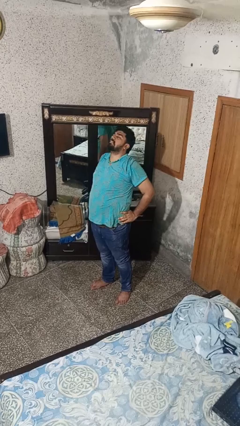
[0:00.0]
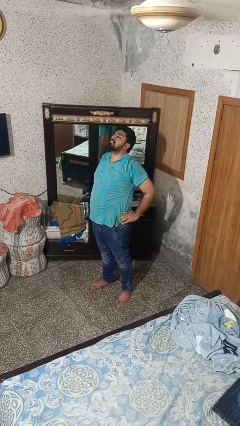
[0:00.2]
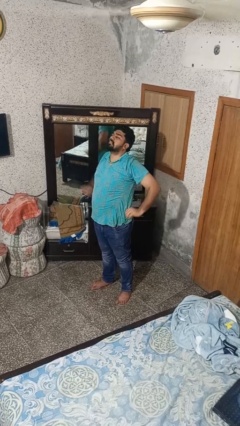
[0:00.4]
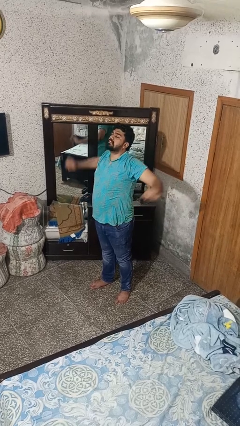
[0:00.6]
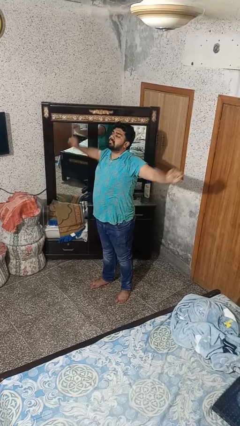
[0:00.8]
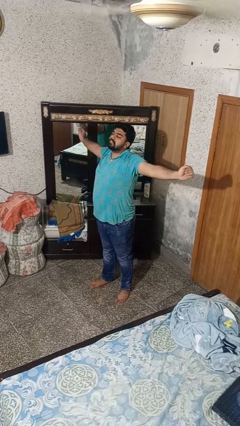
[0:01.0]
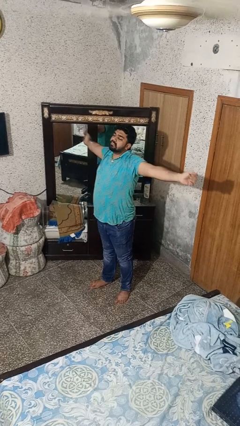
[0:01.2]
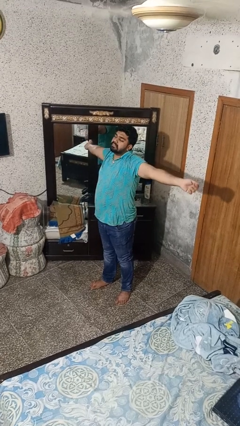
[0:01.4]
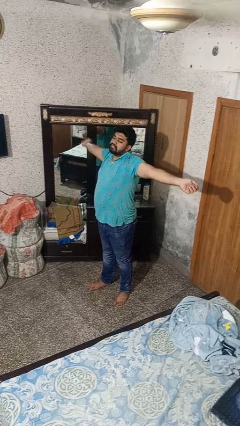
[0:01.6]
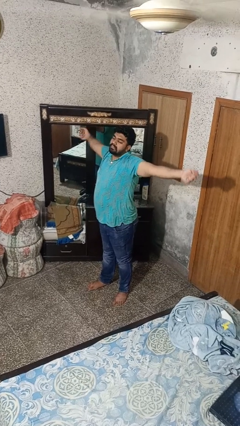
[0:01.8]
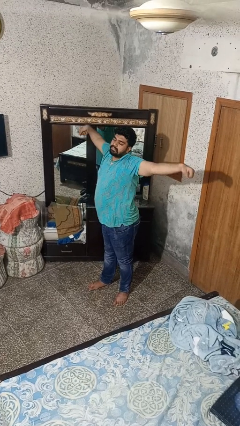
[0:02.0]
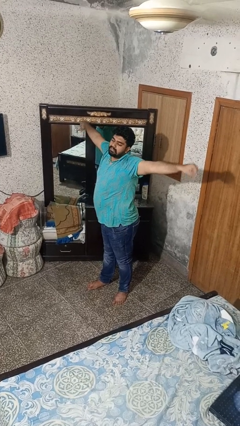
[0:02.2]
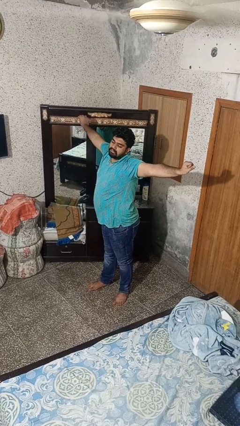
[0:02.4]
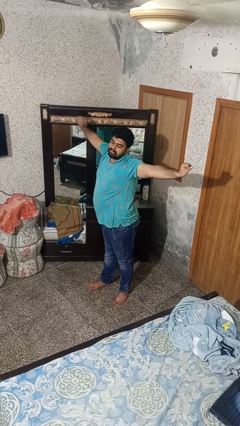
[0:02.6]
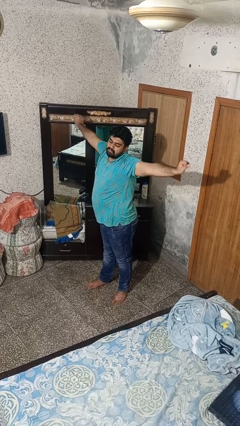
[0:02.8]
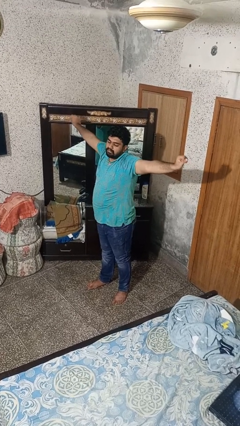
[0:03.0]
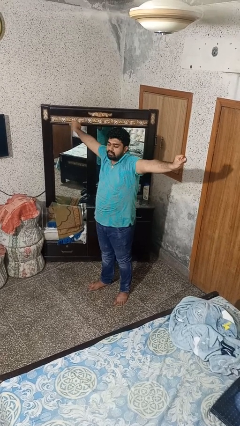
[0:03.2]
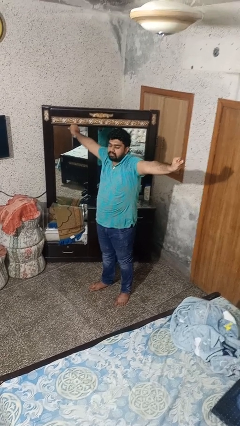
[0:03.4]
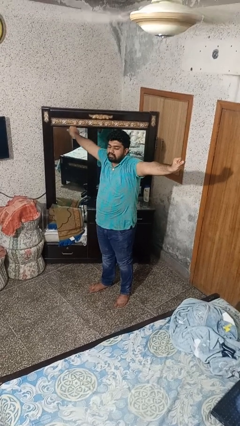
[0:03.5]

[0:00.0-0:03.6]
person stretches arms to side

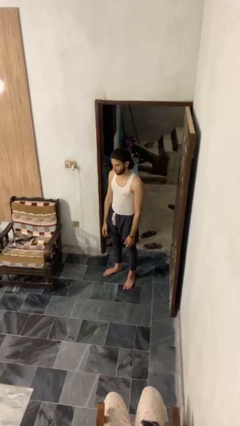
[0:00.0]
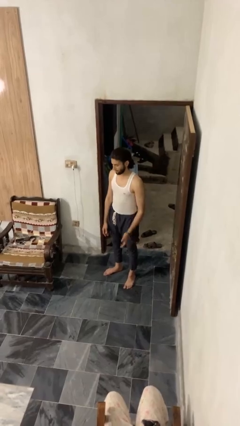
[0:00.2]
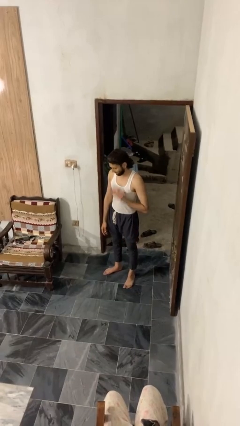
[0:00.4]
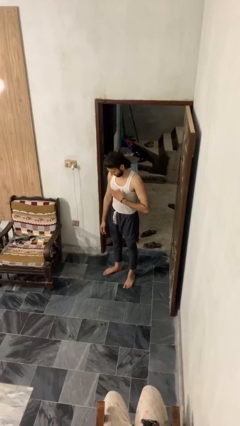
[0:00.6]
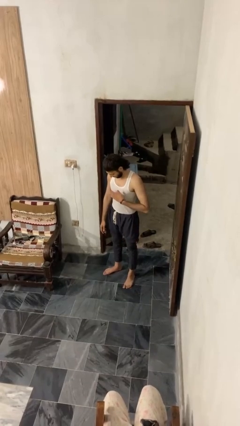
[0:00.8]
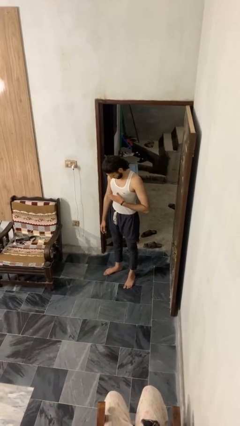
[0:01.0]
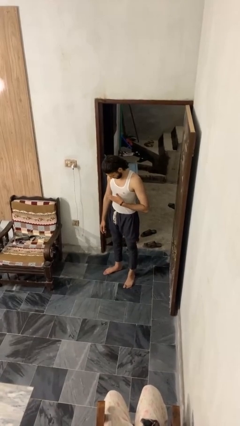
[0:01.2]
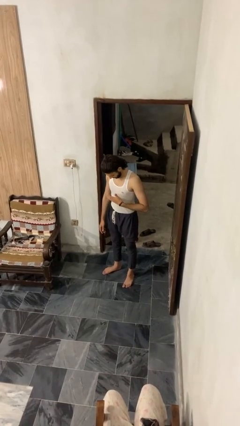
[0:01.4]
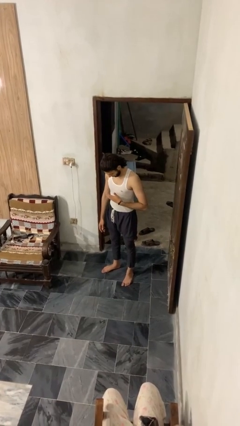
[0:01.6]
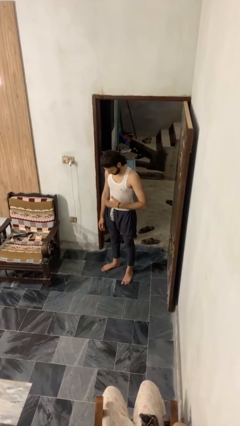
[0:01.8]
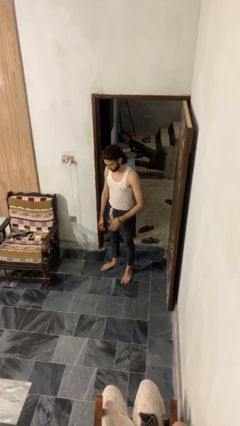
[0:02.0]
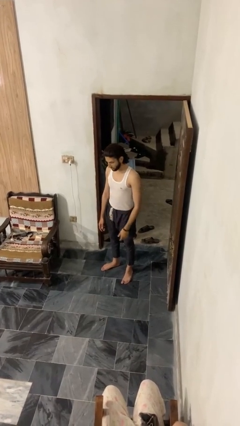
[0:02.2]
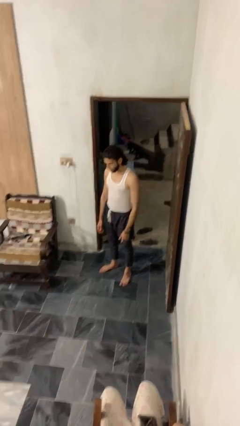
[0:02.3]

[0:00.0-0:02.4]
person swats bug

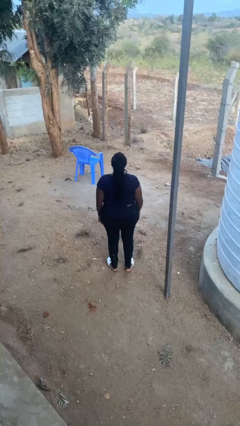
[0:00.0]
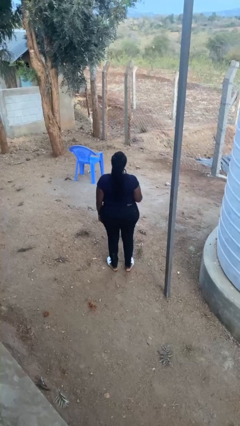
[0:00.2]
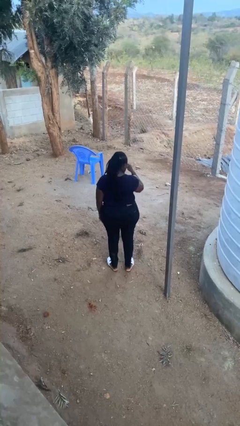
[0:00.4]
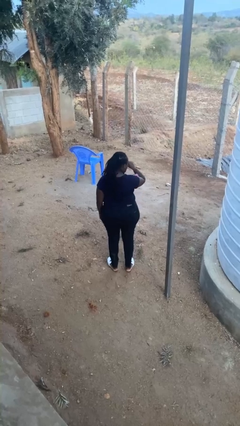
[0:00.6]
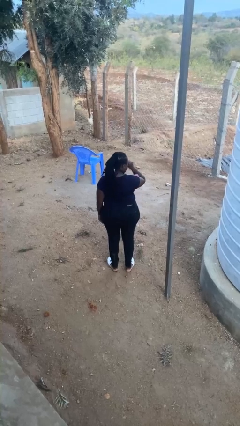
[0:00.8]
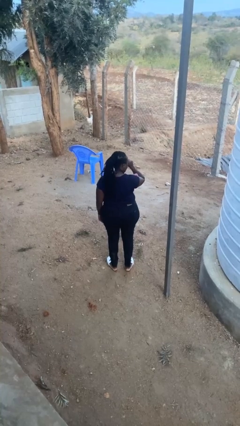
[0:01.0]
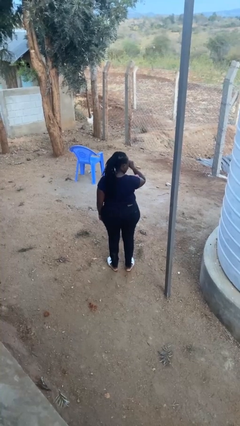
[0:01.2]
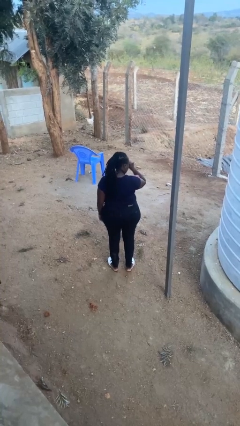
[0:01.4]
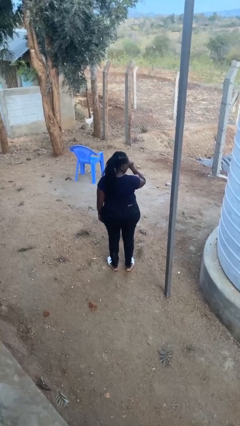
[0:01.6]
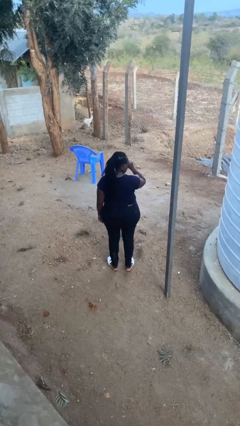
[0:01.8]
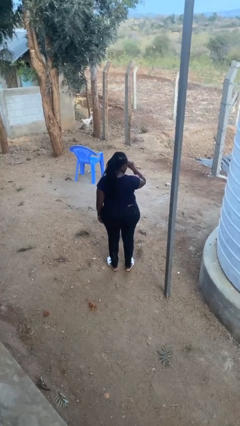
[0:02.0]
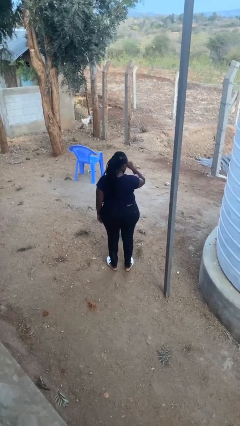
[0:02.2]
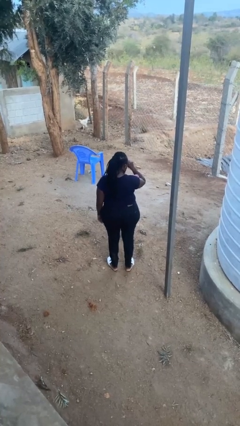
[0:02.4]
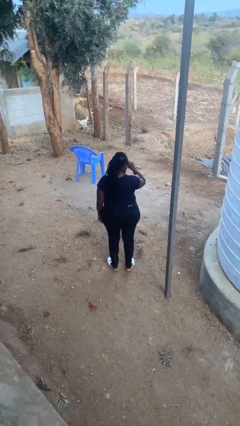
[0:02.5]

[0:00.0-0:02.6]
person rubs eyes

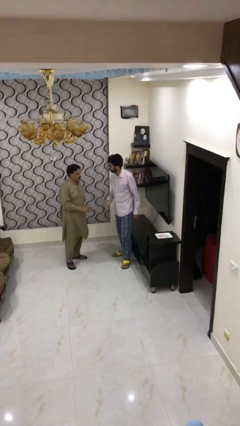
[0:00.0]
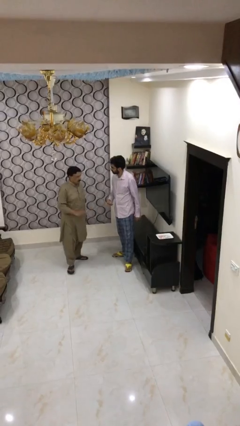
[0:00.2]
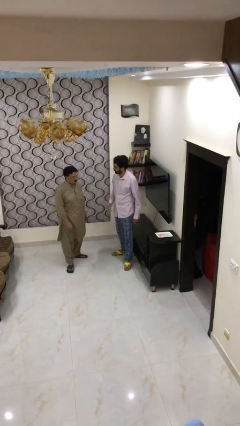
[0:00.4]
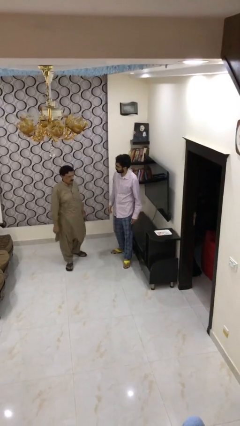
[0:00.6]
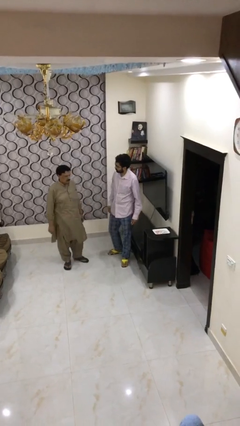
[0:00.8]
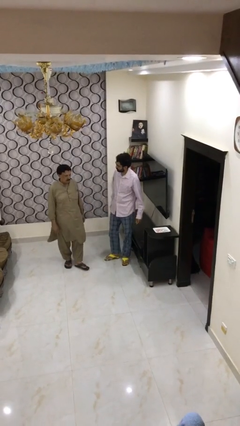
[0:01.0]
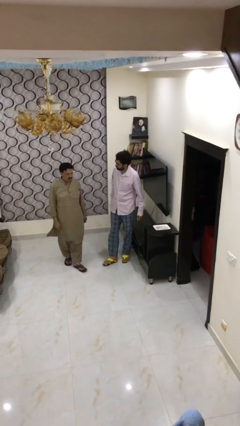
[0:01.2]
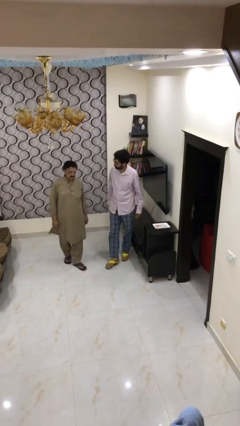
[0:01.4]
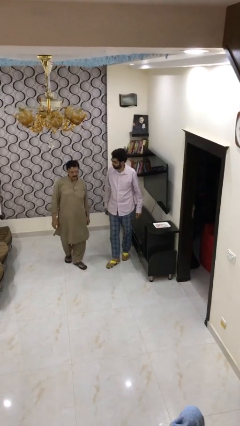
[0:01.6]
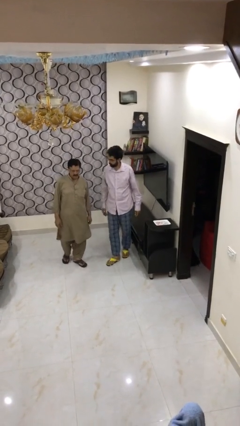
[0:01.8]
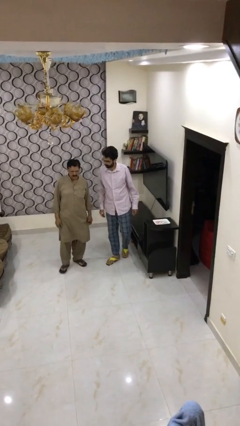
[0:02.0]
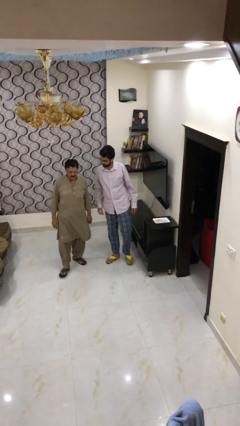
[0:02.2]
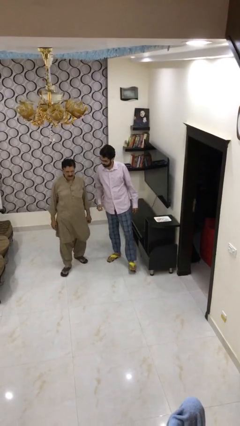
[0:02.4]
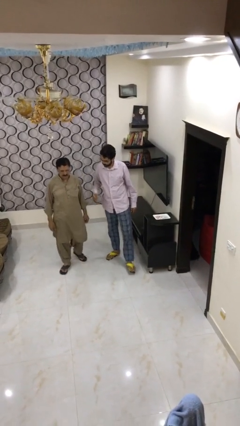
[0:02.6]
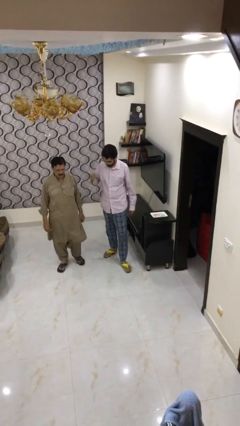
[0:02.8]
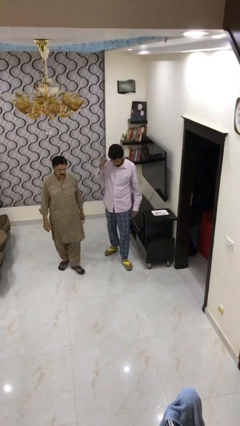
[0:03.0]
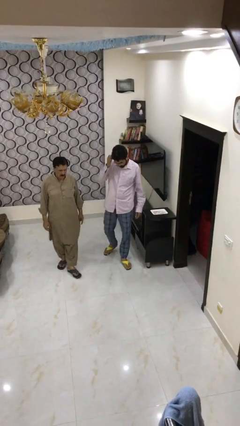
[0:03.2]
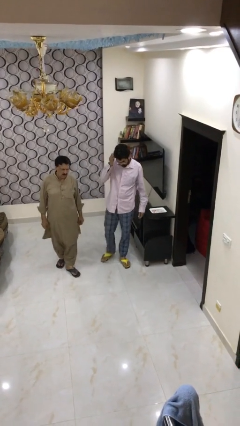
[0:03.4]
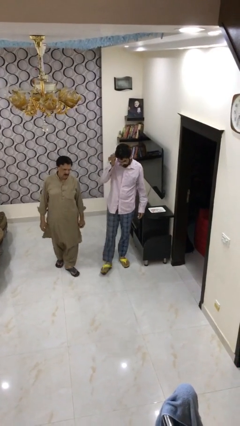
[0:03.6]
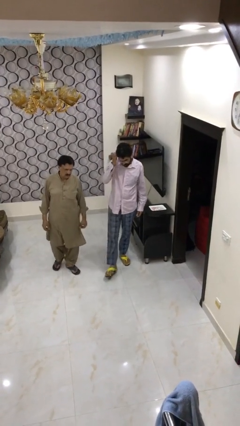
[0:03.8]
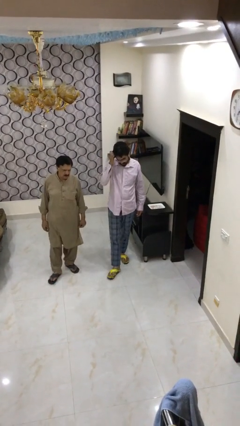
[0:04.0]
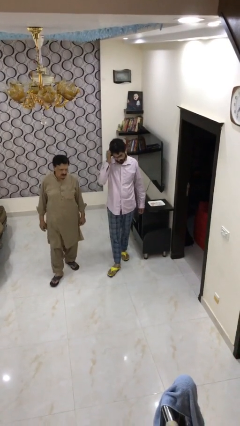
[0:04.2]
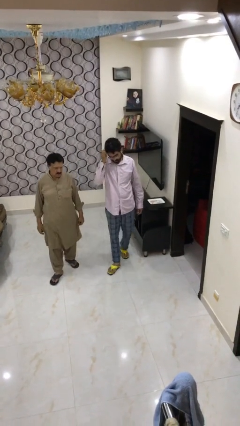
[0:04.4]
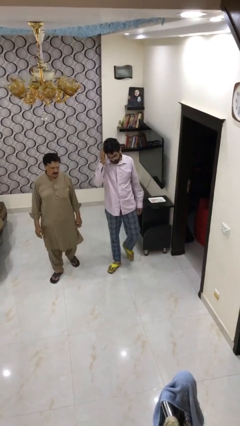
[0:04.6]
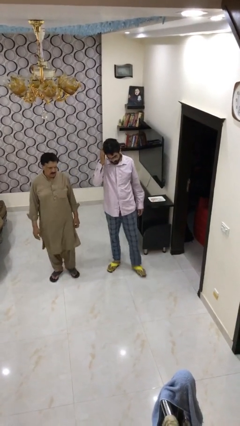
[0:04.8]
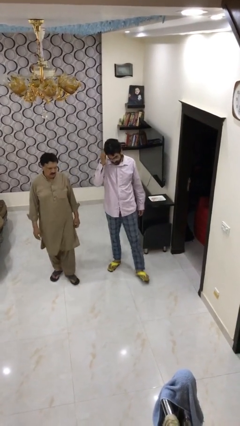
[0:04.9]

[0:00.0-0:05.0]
person talks to person

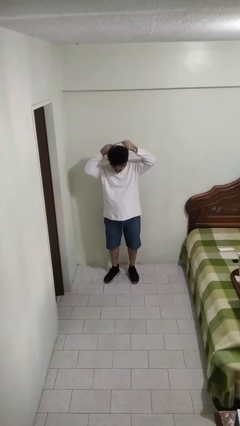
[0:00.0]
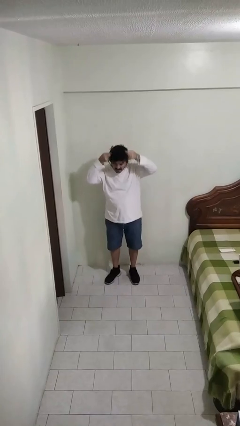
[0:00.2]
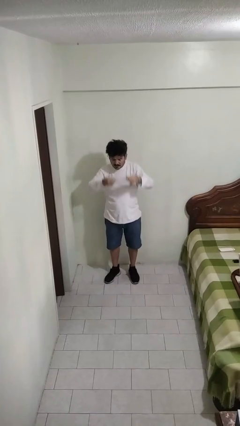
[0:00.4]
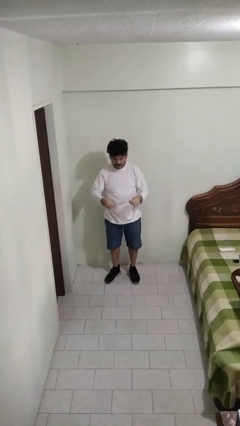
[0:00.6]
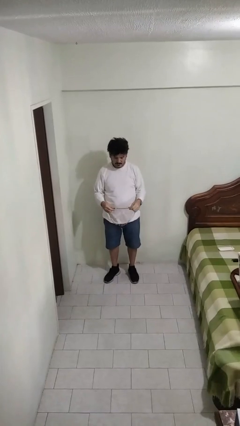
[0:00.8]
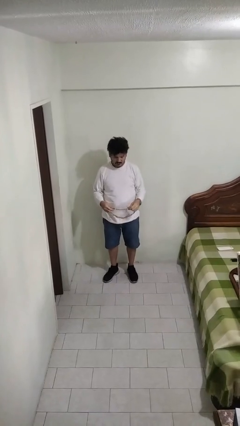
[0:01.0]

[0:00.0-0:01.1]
person takes off necklace

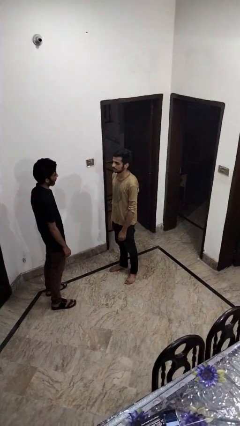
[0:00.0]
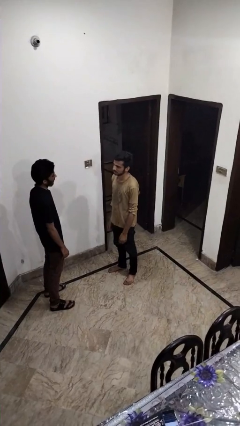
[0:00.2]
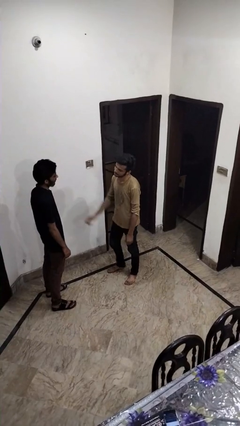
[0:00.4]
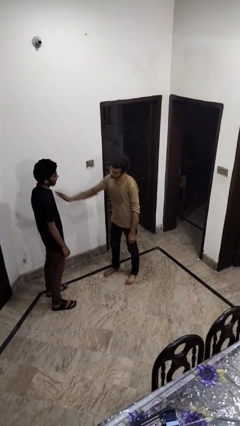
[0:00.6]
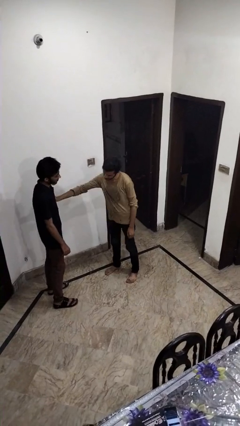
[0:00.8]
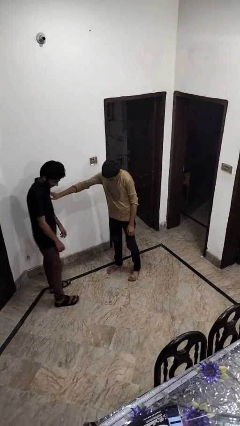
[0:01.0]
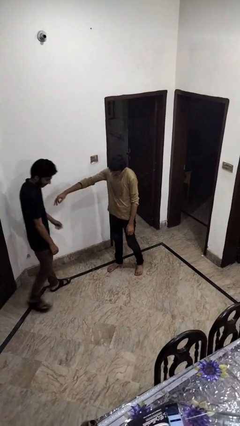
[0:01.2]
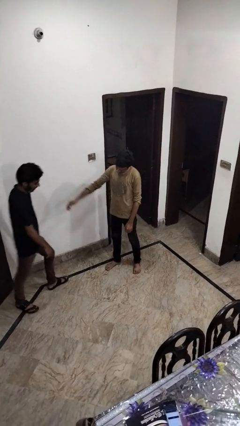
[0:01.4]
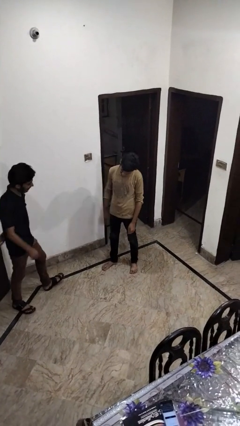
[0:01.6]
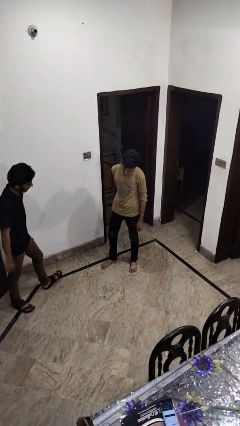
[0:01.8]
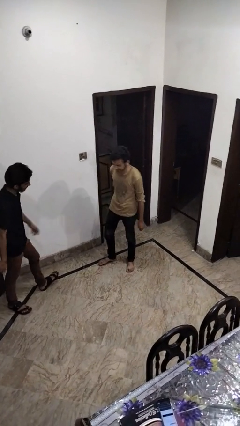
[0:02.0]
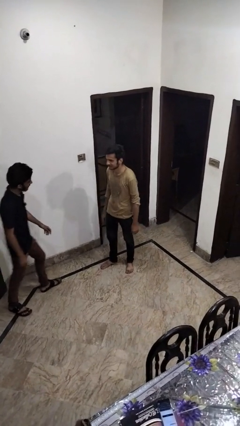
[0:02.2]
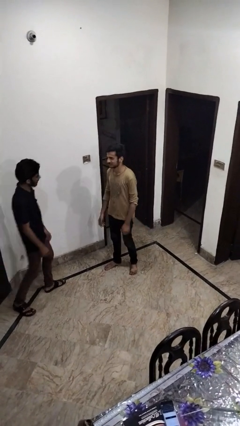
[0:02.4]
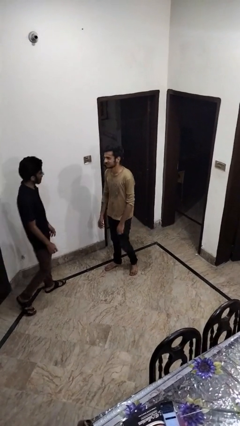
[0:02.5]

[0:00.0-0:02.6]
person shoves person

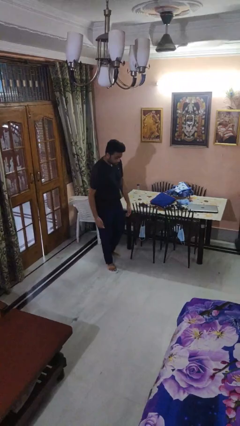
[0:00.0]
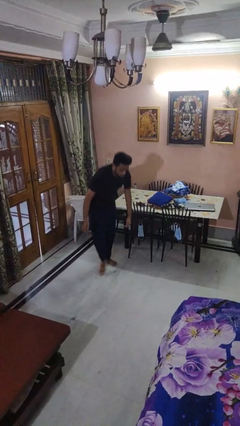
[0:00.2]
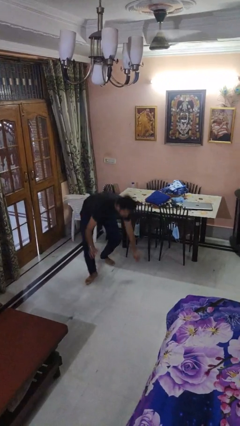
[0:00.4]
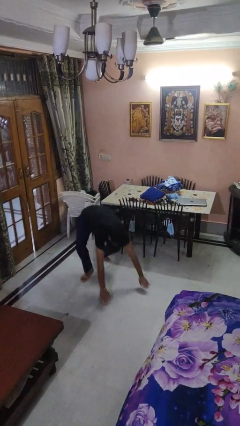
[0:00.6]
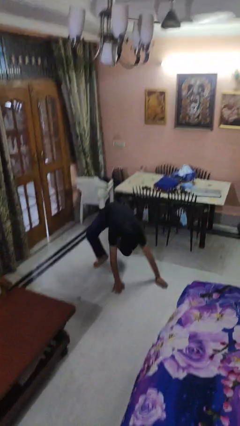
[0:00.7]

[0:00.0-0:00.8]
person trips on object on floor
